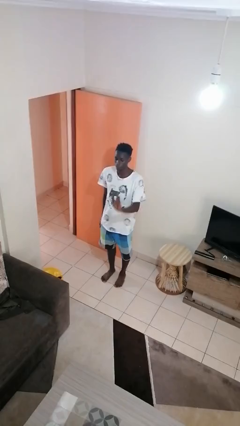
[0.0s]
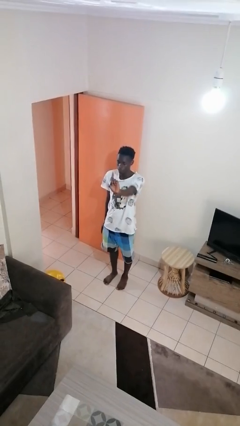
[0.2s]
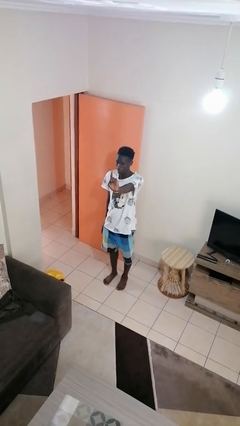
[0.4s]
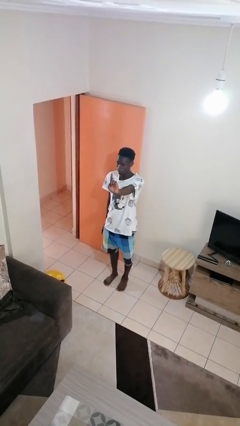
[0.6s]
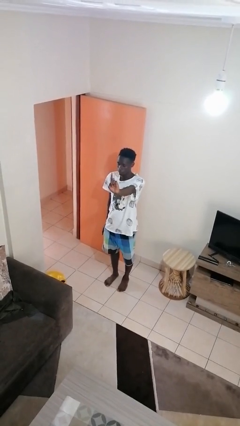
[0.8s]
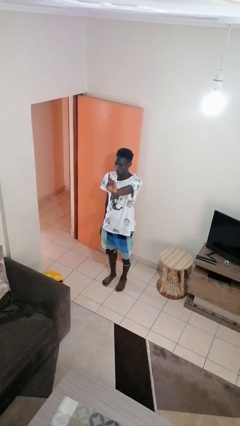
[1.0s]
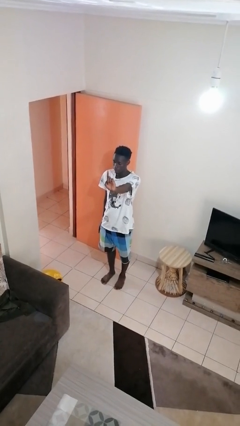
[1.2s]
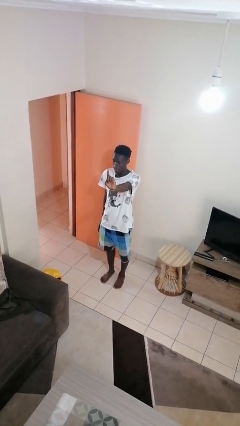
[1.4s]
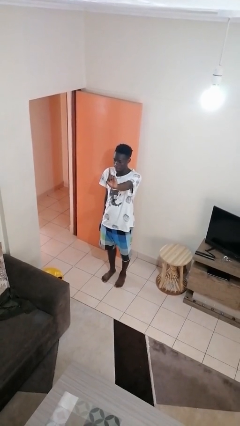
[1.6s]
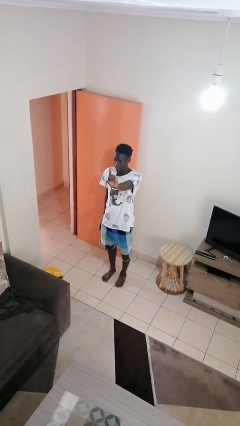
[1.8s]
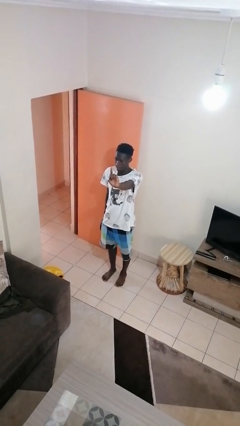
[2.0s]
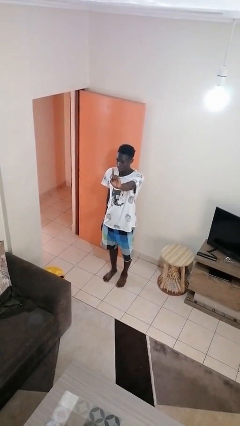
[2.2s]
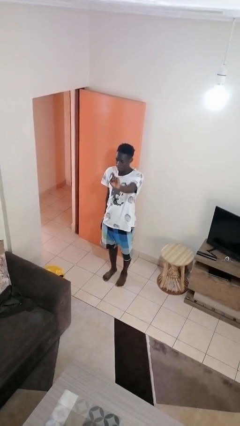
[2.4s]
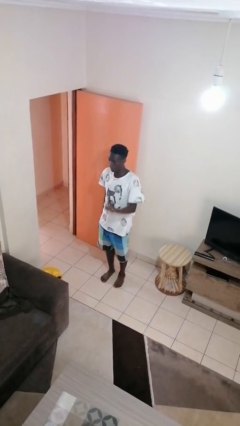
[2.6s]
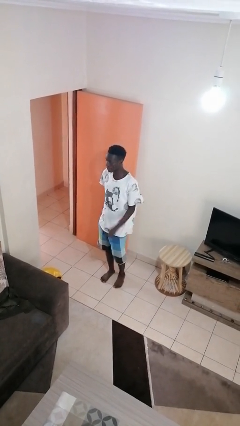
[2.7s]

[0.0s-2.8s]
person gestures number one

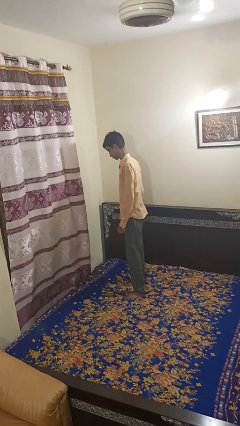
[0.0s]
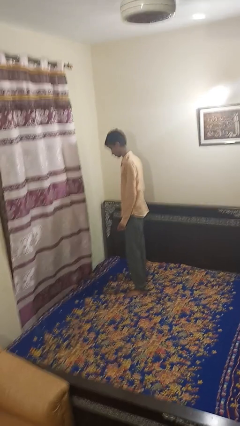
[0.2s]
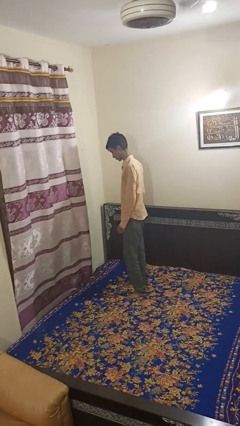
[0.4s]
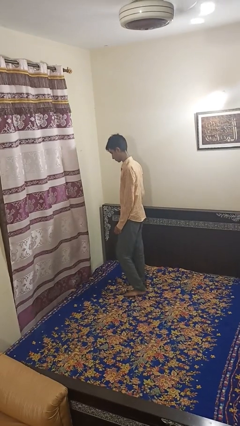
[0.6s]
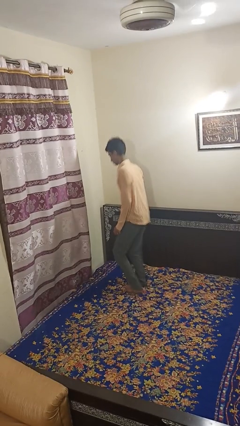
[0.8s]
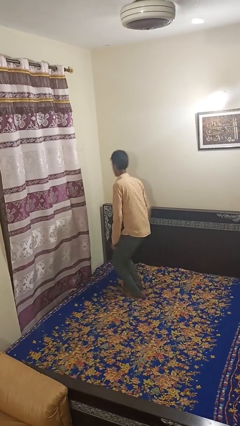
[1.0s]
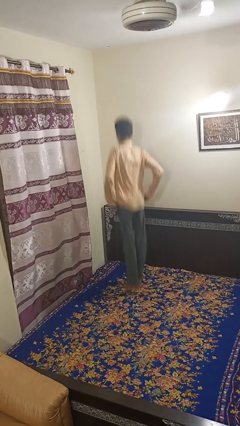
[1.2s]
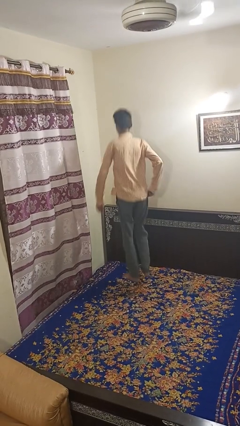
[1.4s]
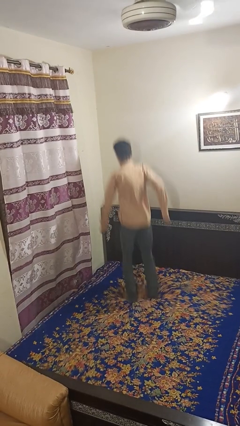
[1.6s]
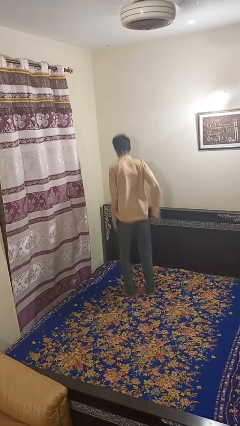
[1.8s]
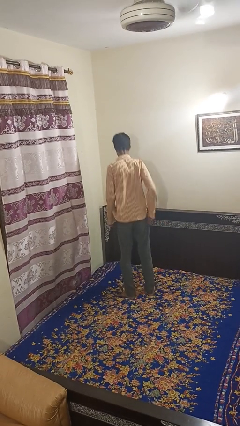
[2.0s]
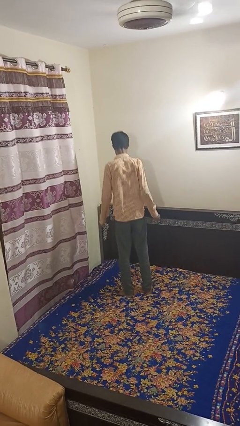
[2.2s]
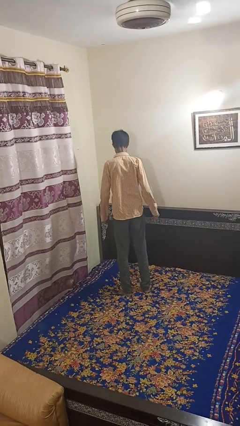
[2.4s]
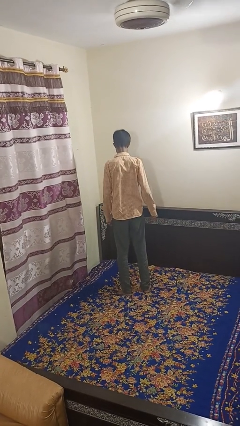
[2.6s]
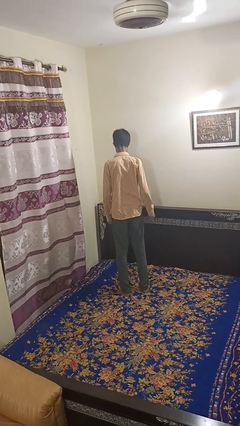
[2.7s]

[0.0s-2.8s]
person jumps on bed

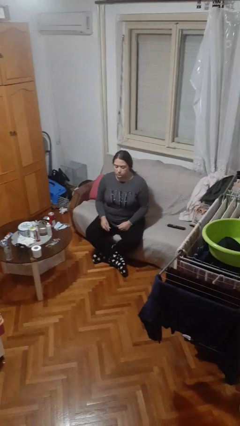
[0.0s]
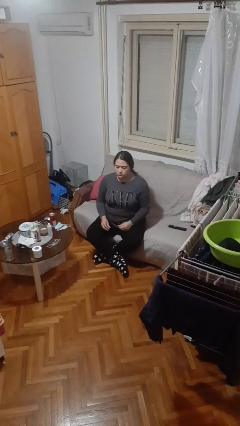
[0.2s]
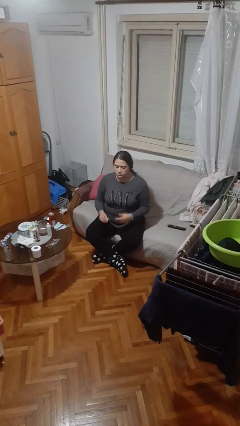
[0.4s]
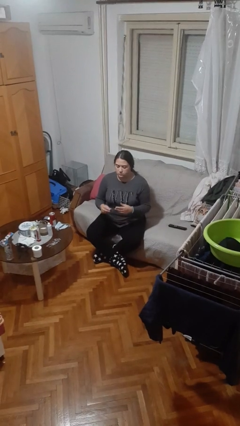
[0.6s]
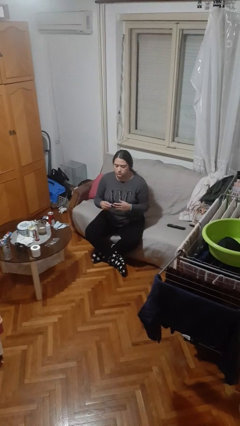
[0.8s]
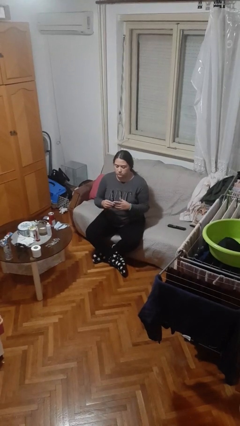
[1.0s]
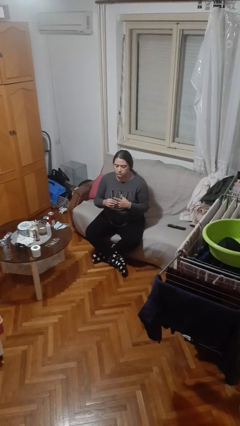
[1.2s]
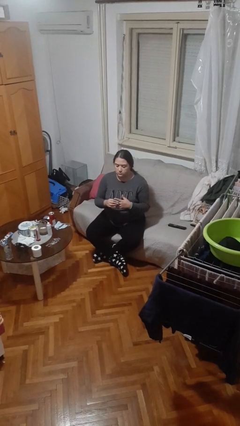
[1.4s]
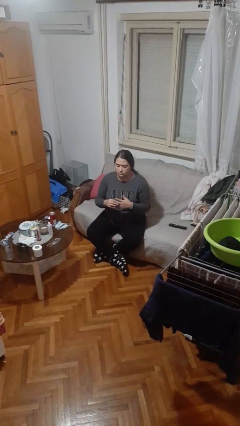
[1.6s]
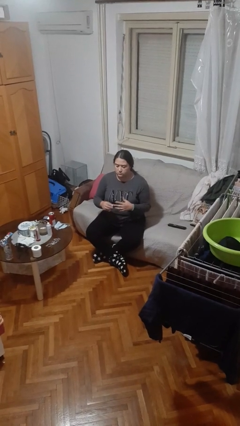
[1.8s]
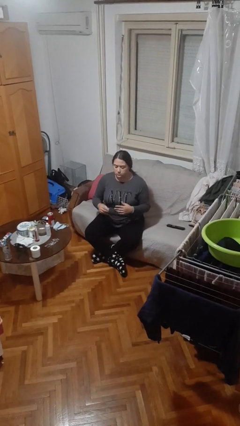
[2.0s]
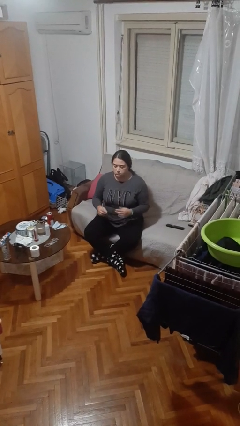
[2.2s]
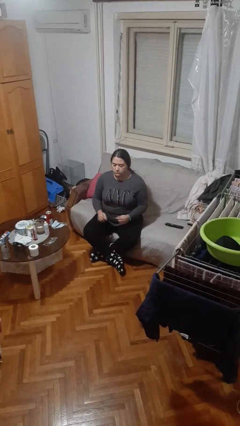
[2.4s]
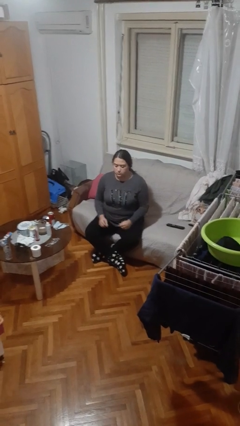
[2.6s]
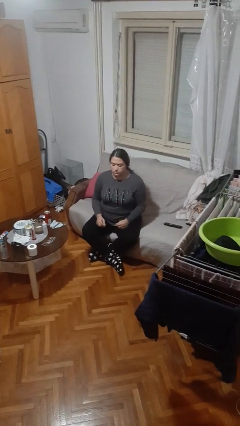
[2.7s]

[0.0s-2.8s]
person puts on ring

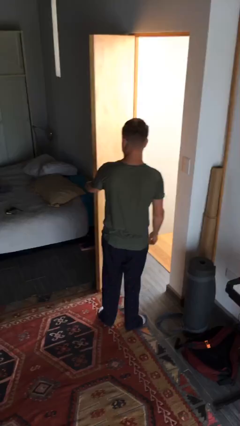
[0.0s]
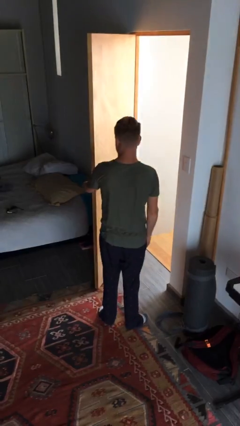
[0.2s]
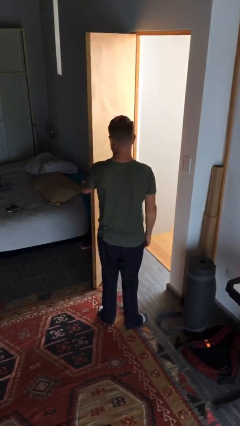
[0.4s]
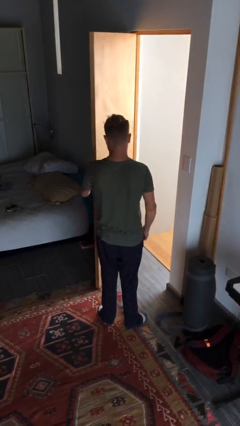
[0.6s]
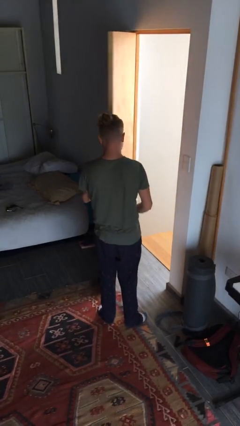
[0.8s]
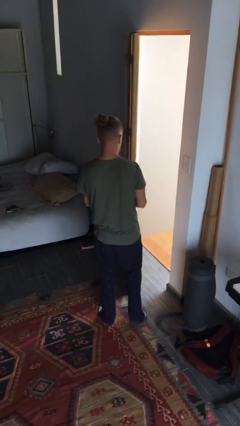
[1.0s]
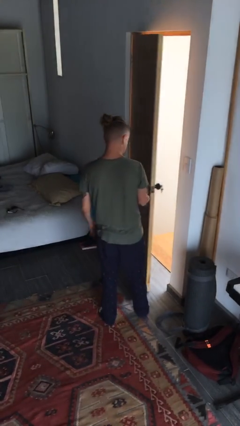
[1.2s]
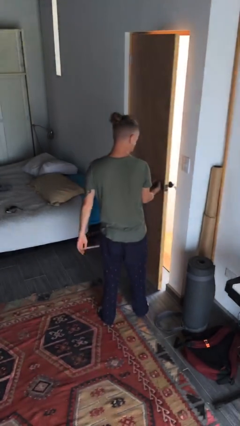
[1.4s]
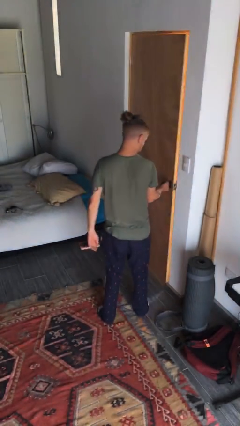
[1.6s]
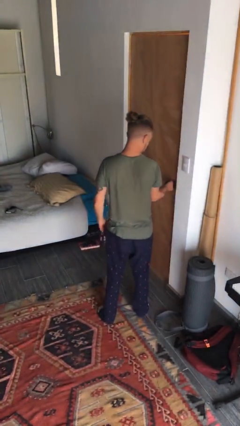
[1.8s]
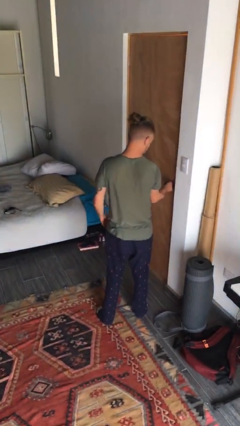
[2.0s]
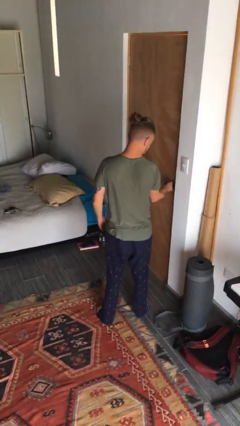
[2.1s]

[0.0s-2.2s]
person closes facility door

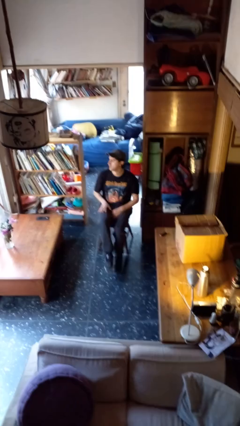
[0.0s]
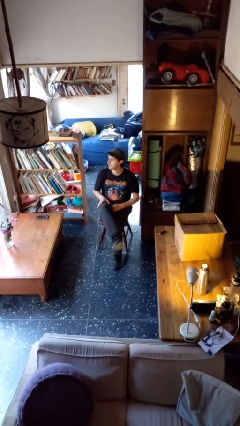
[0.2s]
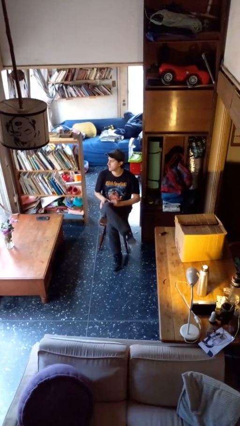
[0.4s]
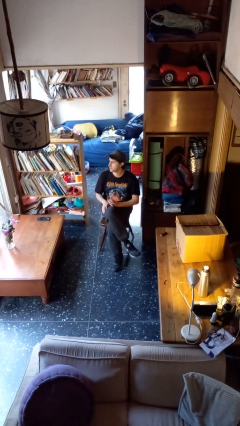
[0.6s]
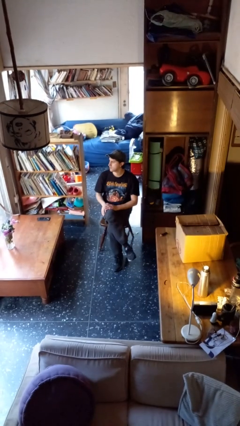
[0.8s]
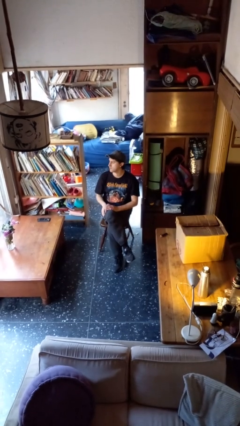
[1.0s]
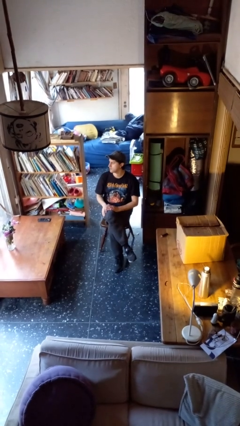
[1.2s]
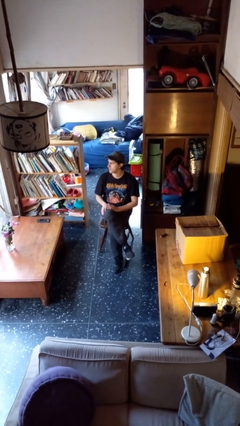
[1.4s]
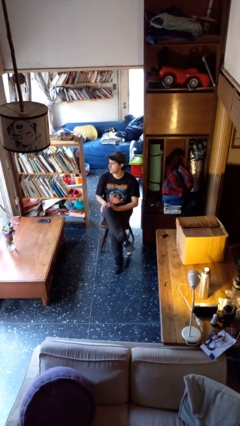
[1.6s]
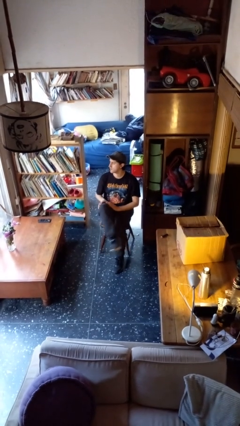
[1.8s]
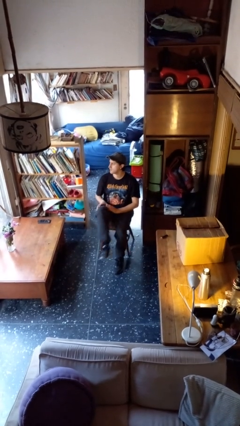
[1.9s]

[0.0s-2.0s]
person crosses legs

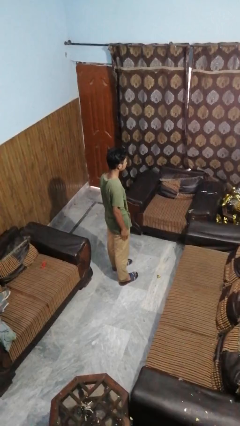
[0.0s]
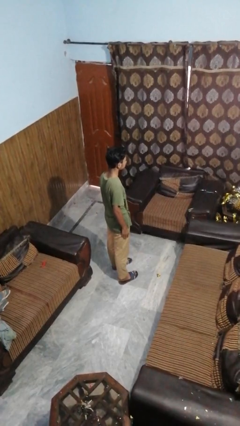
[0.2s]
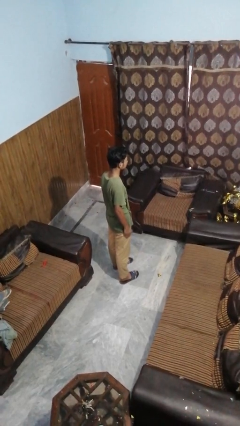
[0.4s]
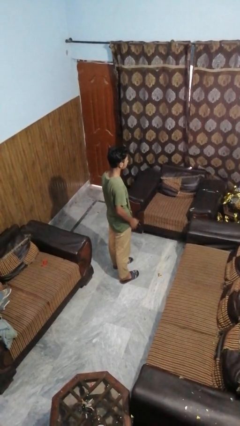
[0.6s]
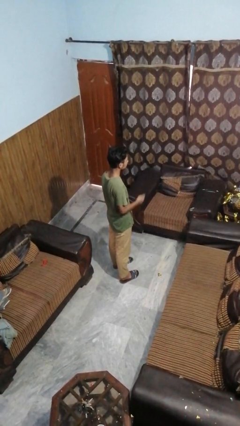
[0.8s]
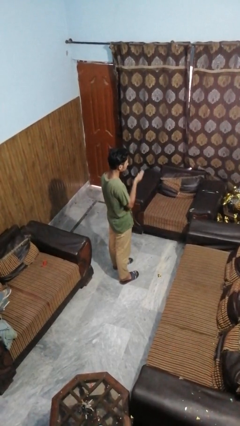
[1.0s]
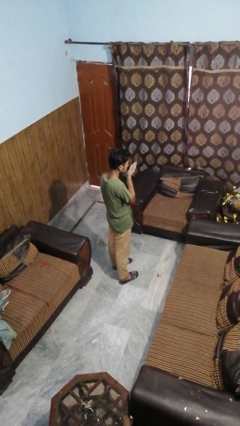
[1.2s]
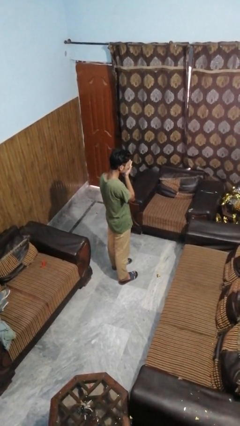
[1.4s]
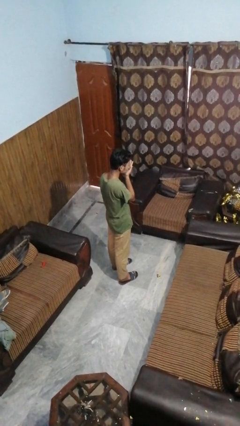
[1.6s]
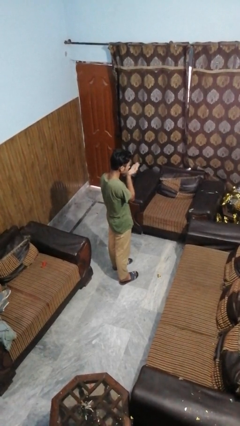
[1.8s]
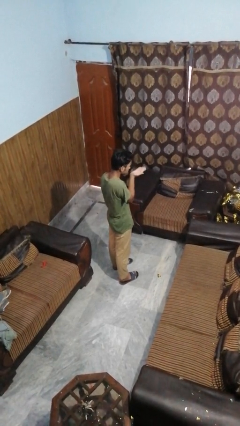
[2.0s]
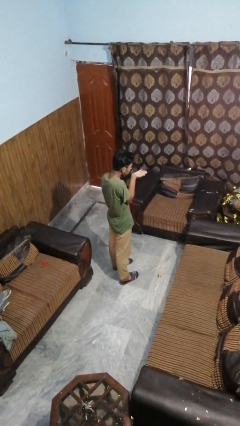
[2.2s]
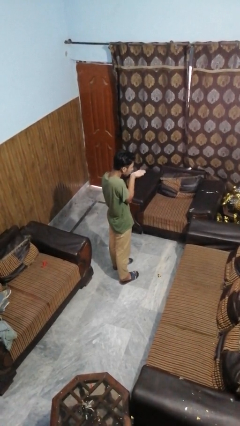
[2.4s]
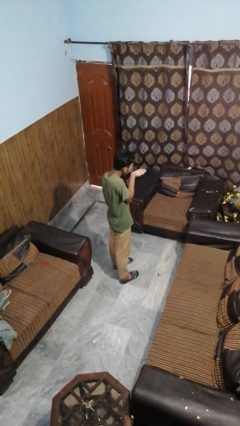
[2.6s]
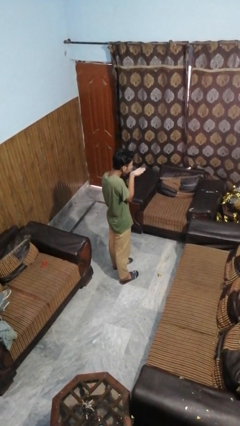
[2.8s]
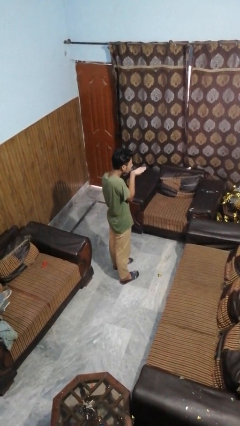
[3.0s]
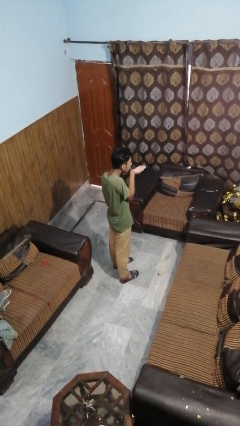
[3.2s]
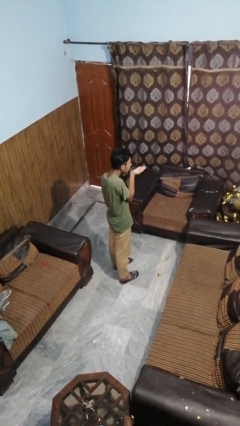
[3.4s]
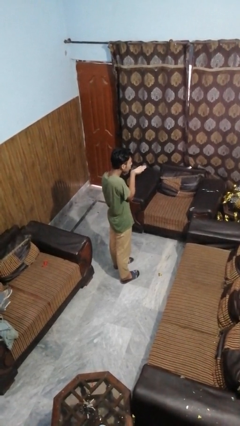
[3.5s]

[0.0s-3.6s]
person gestures blow kiss

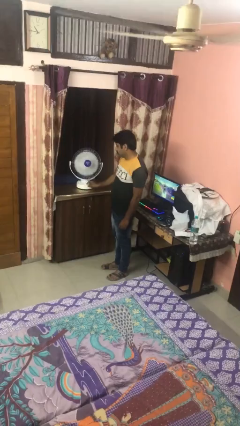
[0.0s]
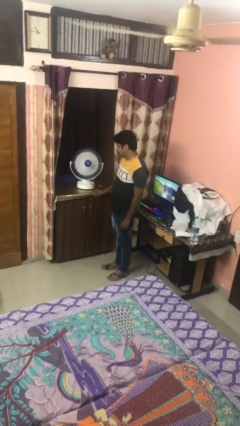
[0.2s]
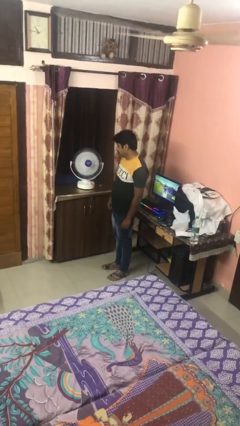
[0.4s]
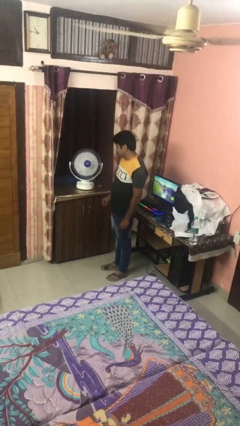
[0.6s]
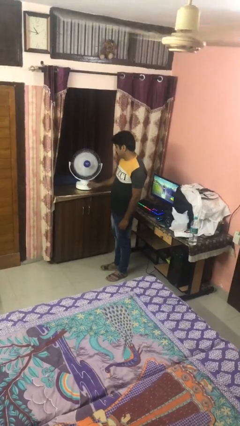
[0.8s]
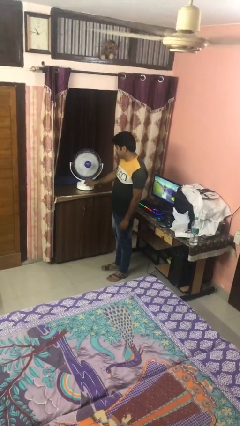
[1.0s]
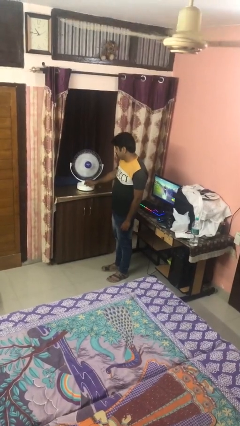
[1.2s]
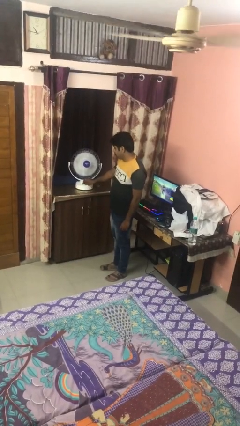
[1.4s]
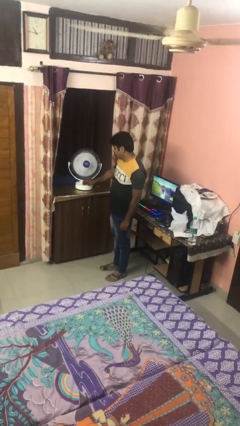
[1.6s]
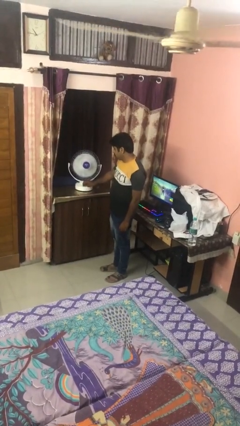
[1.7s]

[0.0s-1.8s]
person turns off fan
